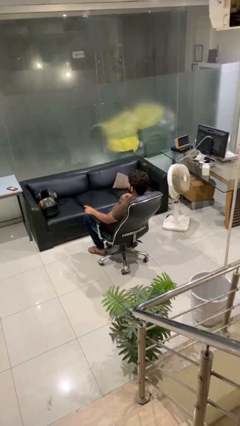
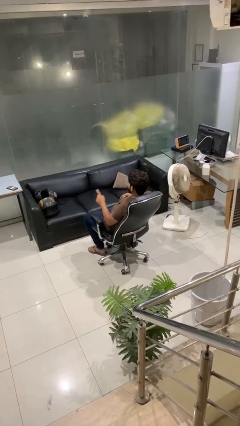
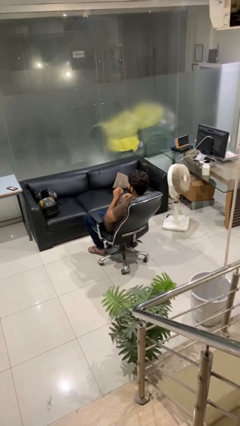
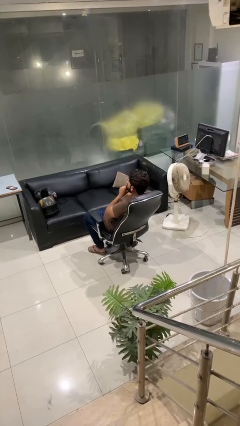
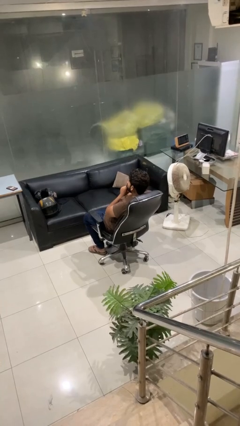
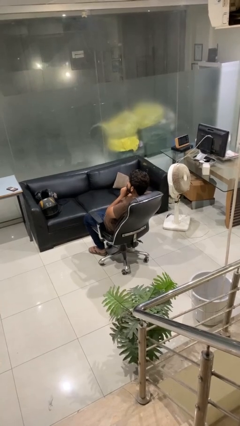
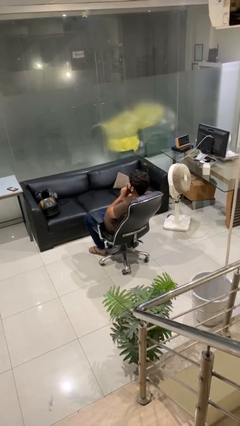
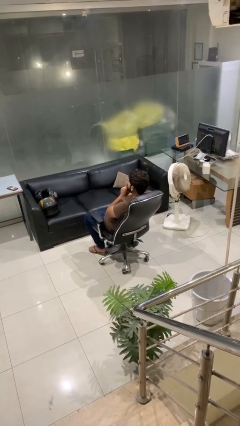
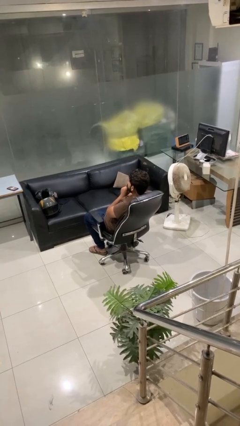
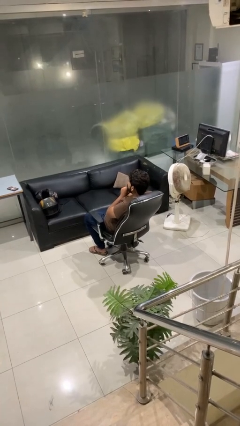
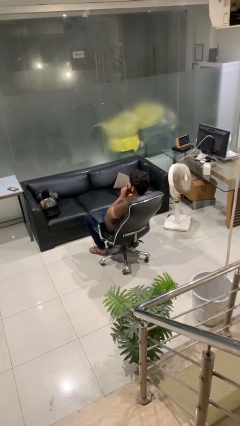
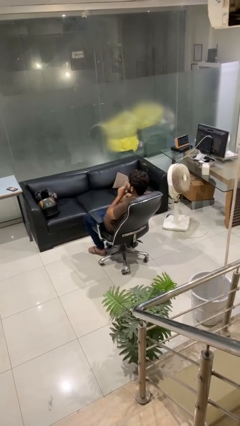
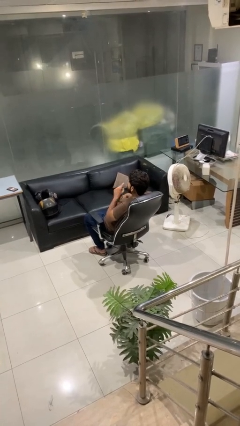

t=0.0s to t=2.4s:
person gestures be quiet

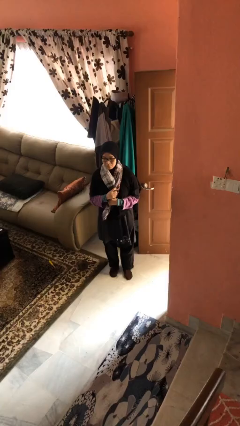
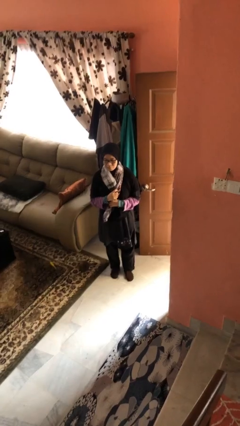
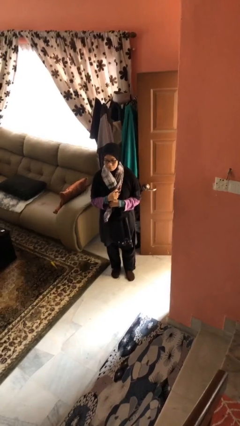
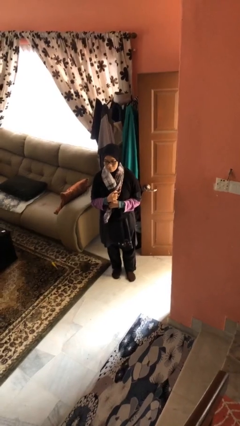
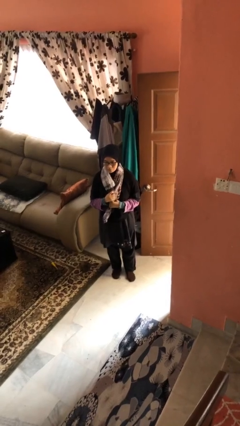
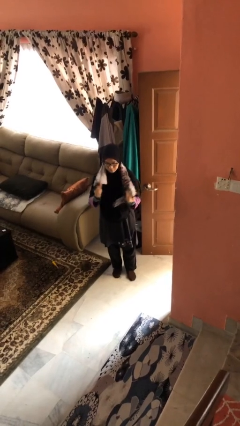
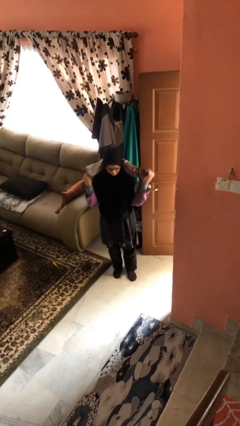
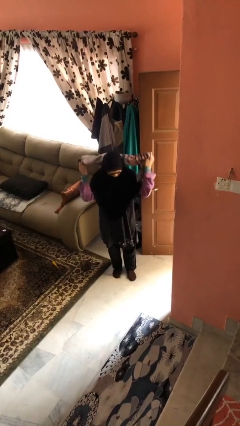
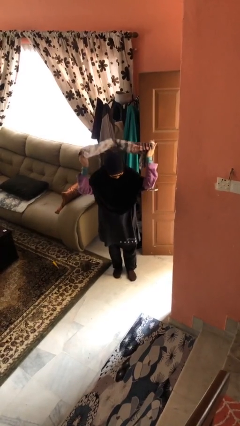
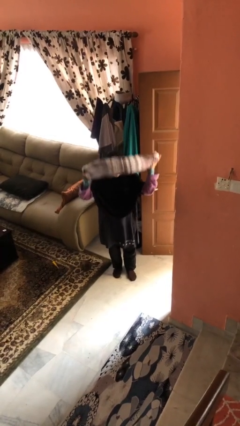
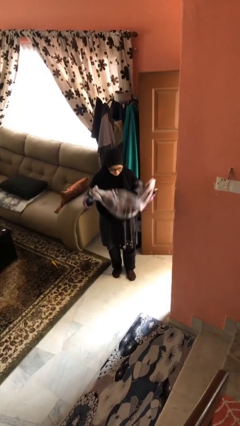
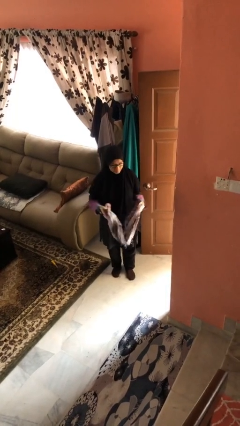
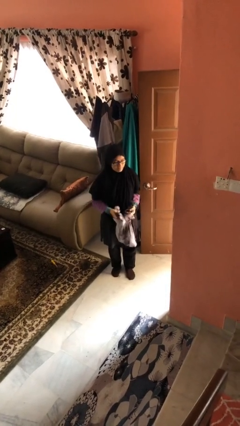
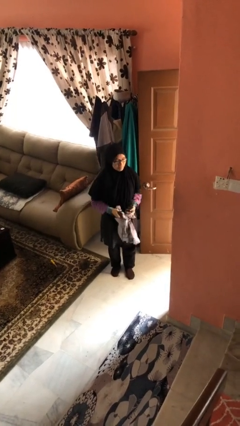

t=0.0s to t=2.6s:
person takes off scarf

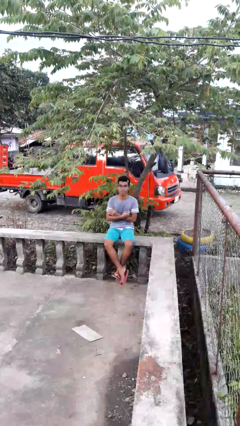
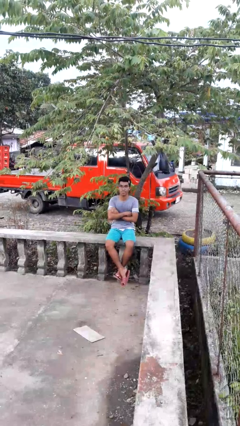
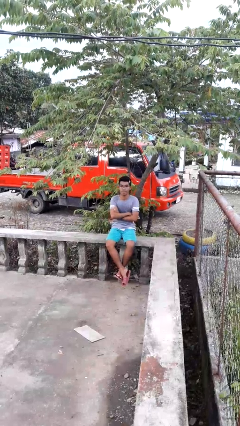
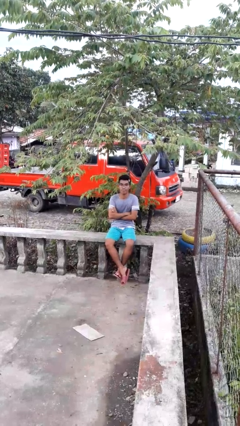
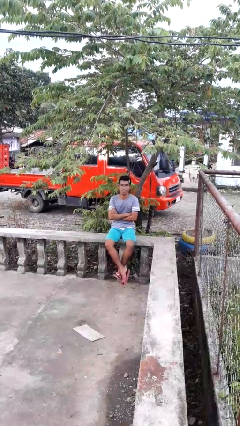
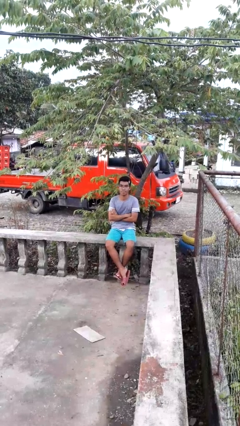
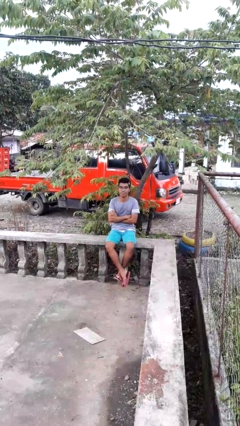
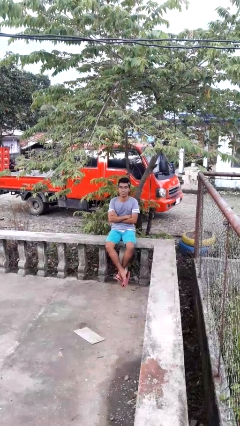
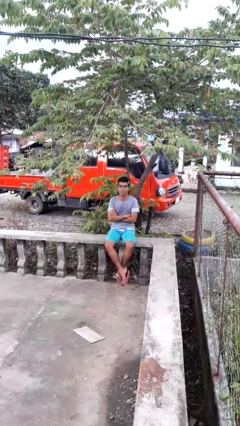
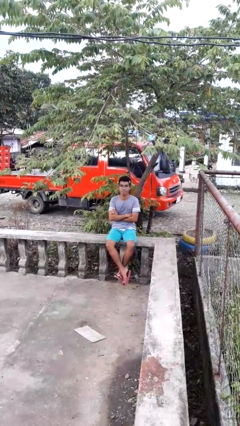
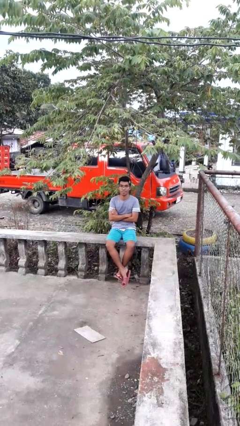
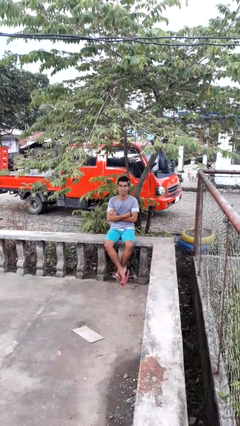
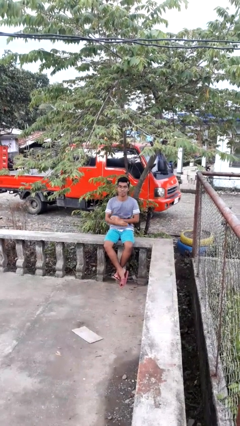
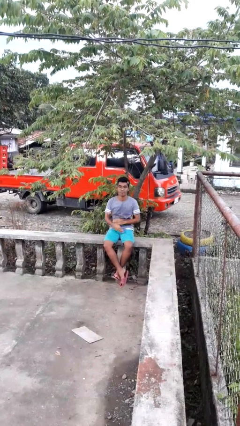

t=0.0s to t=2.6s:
person crosses arms

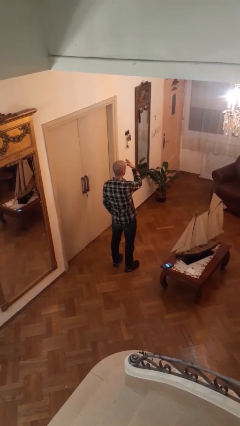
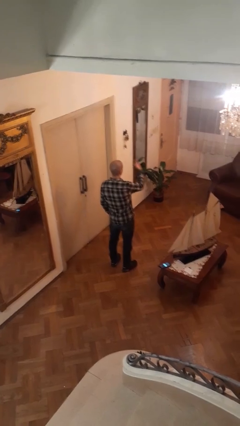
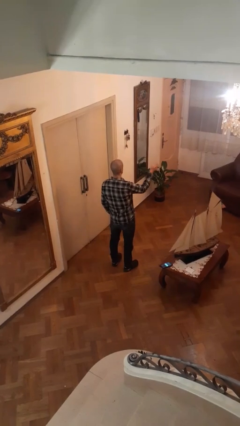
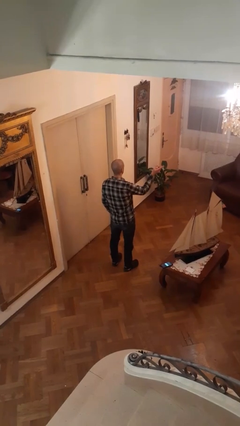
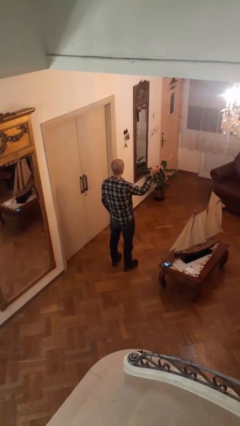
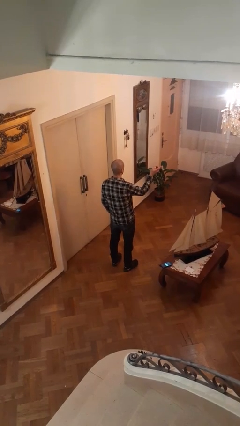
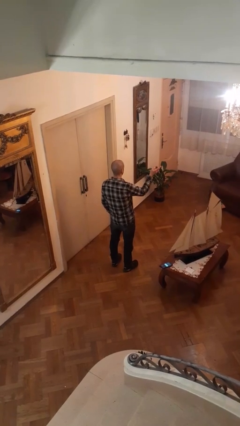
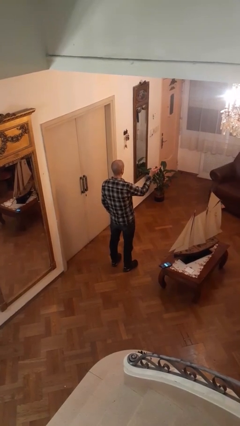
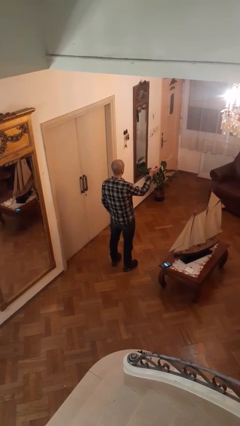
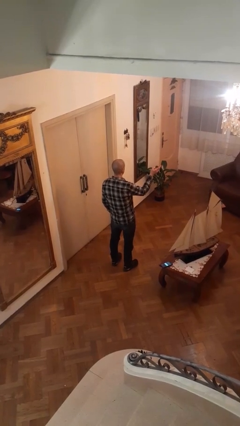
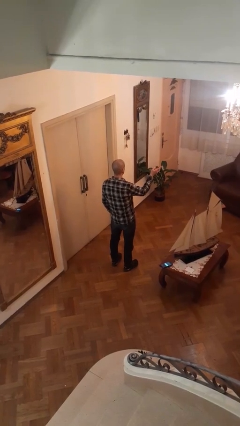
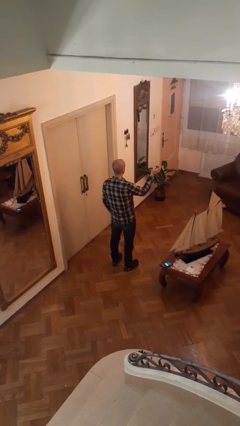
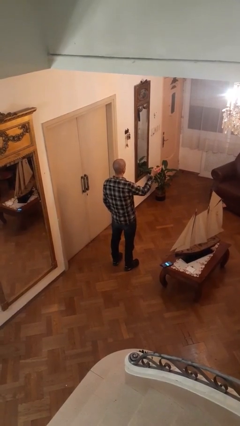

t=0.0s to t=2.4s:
person gestures swipe right

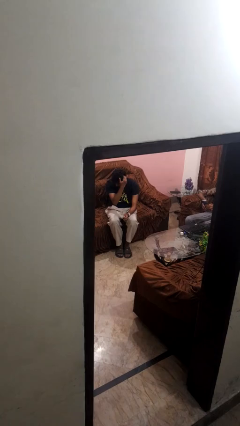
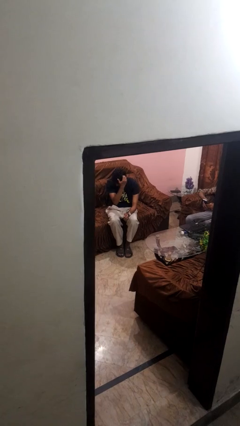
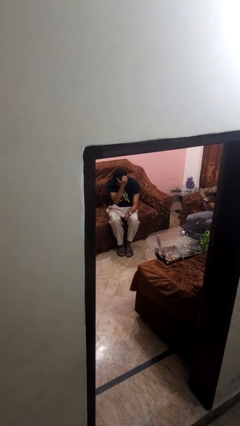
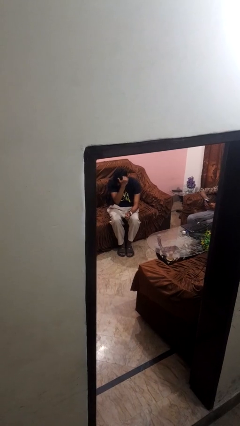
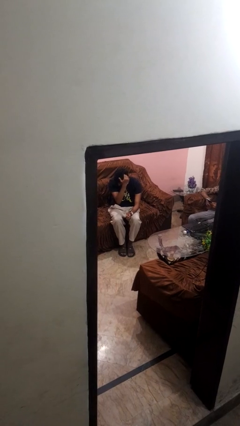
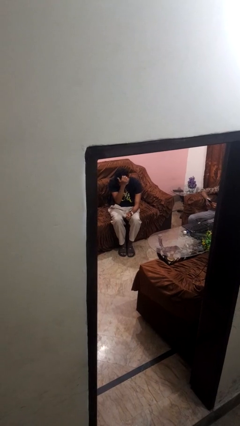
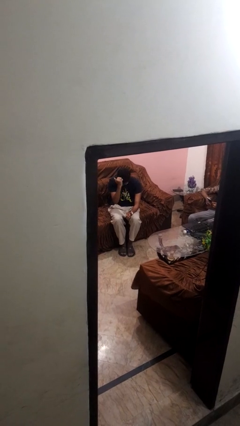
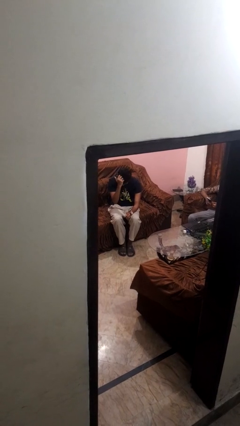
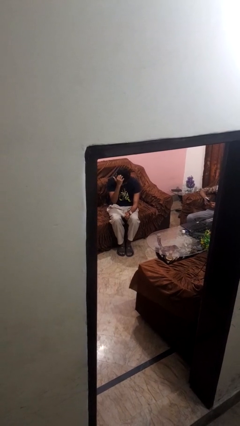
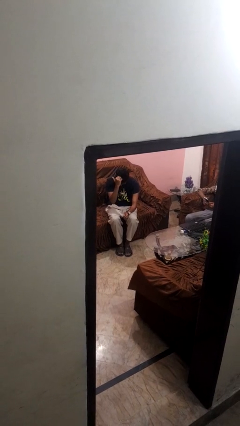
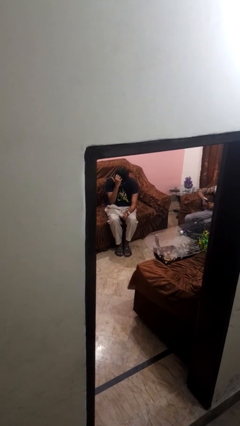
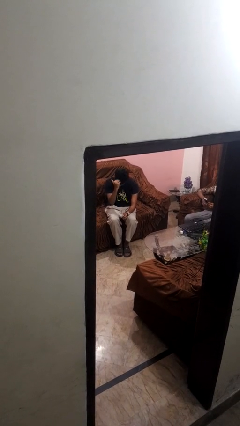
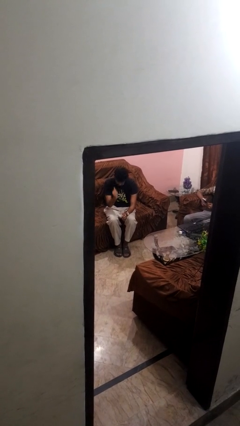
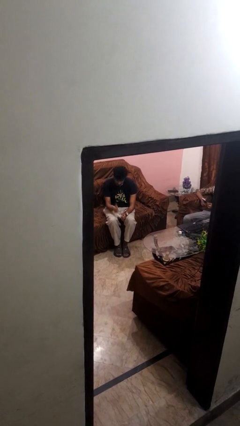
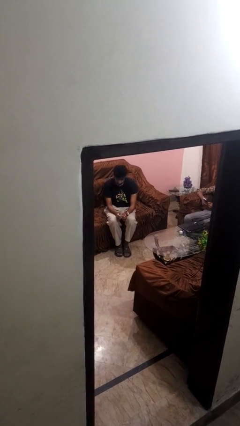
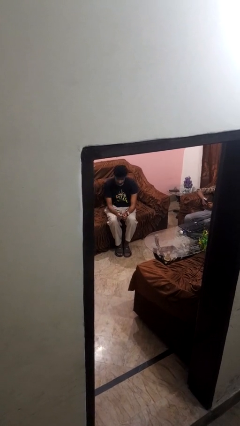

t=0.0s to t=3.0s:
person scratches face

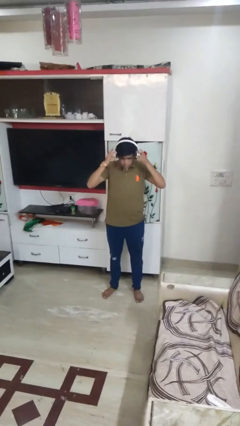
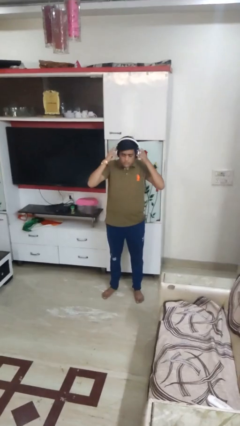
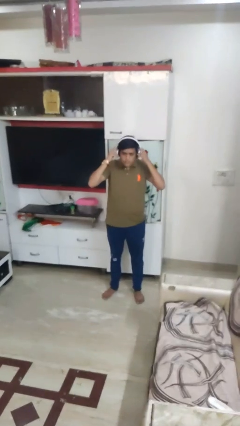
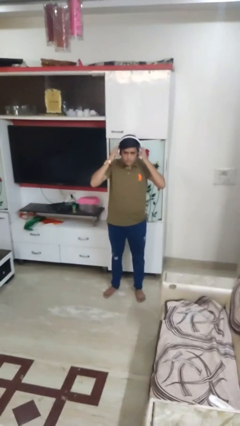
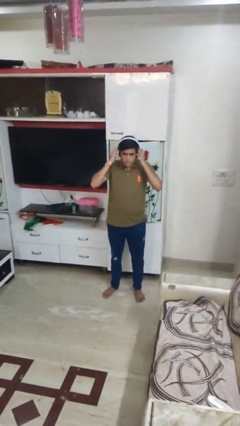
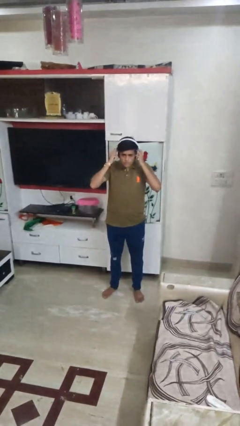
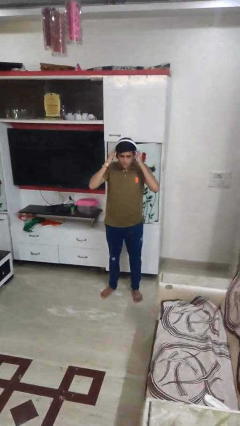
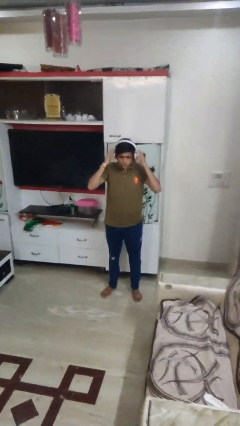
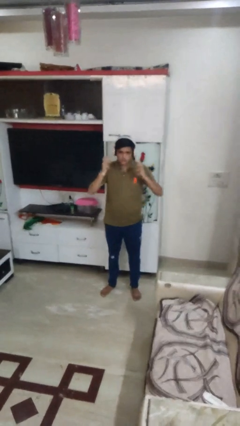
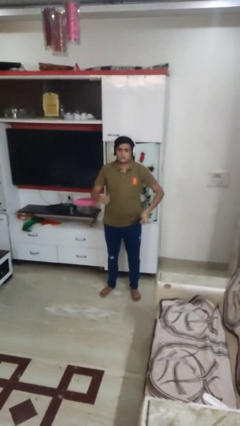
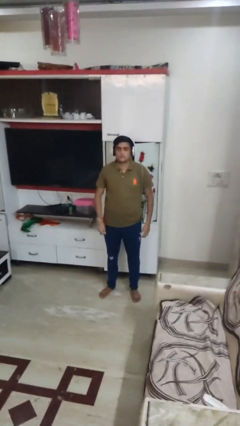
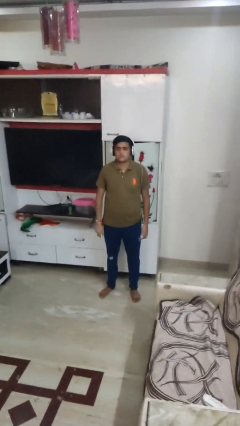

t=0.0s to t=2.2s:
person puts on headphones

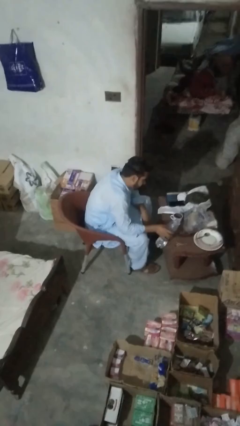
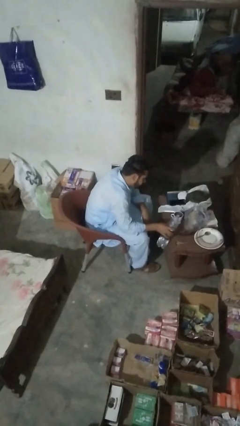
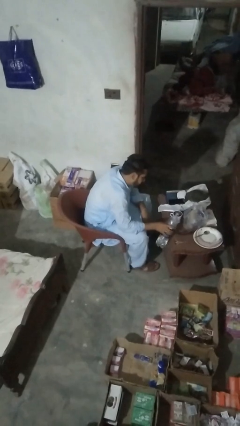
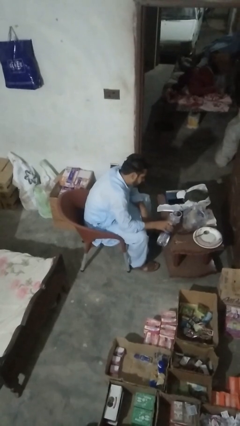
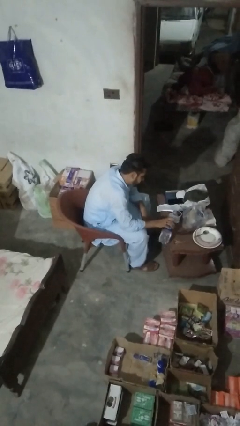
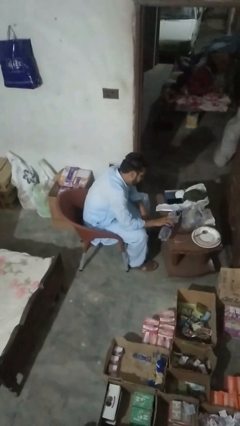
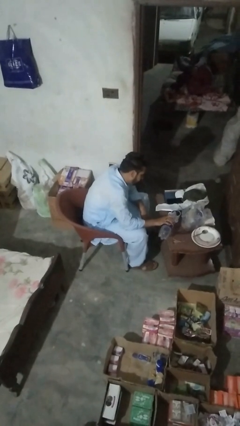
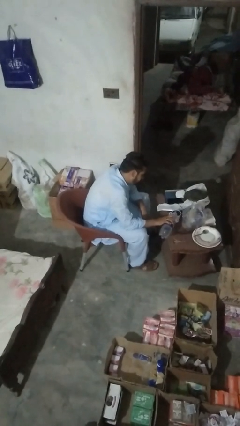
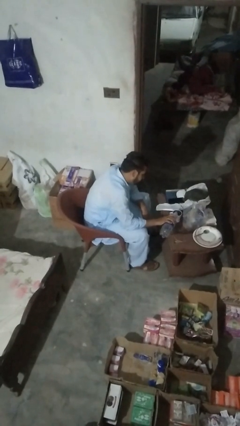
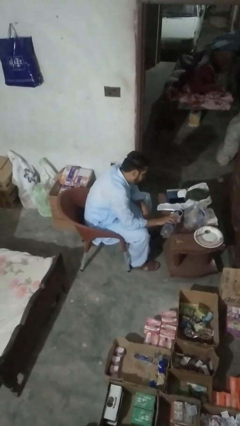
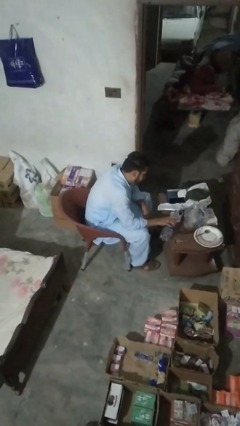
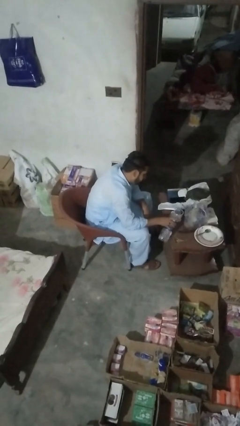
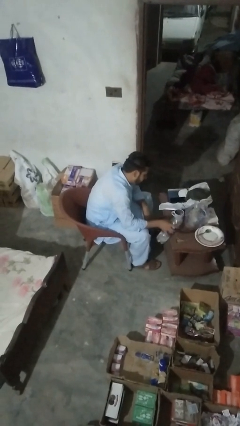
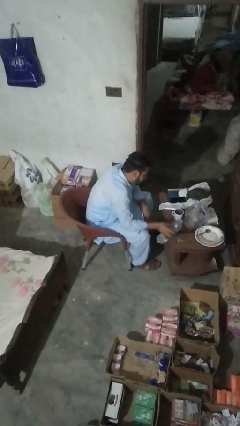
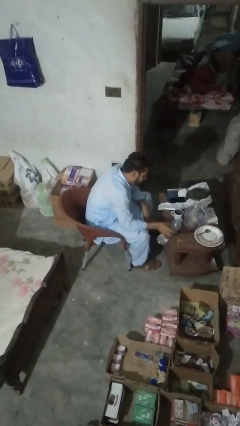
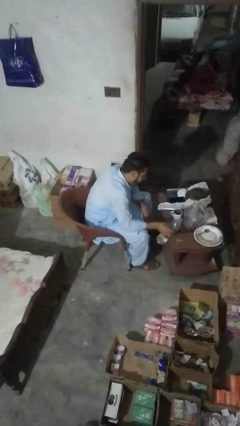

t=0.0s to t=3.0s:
person pours liquid into cup
